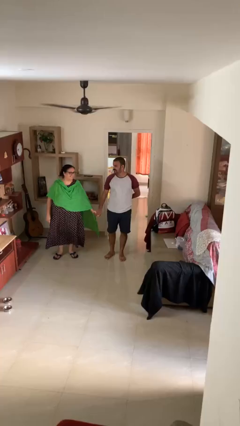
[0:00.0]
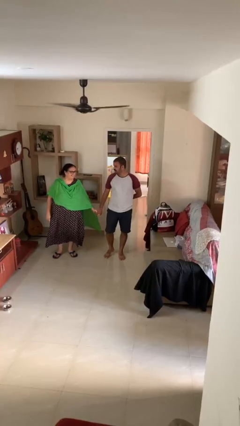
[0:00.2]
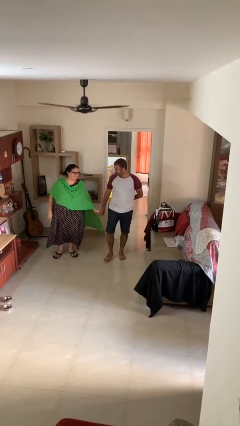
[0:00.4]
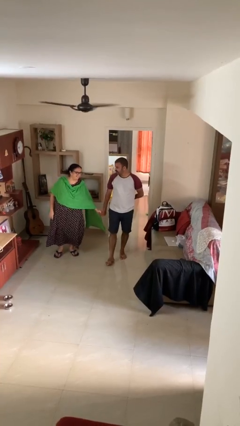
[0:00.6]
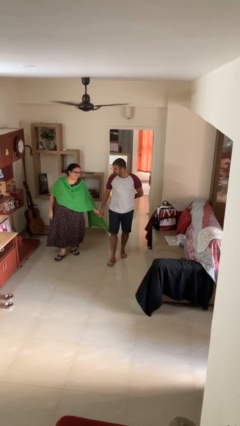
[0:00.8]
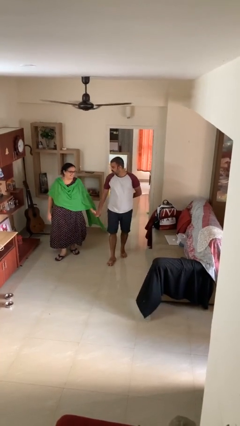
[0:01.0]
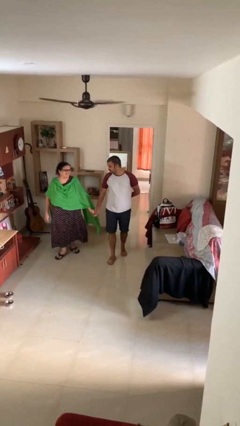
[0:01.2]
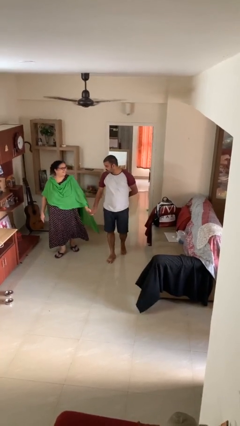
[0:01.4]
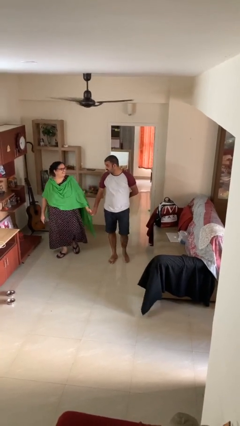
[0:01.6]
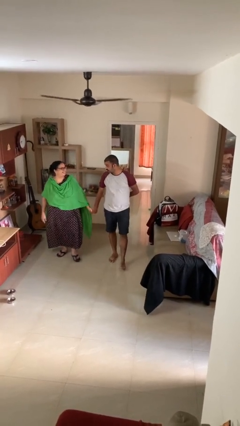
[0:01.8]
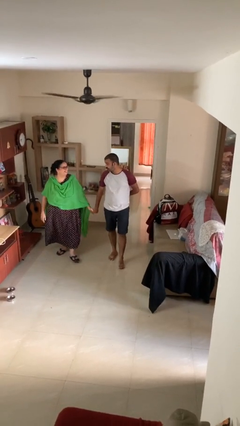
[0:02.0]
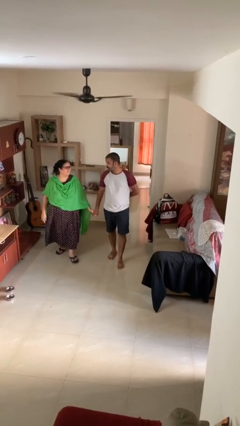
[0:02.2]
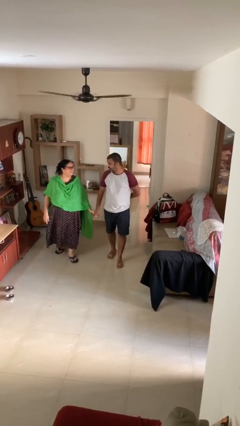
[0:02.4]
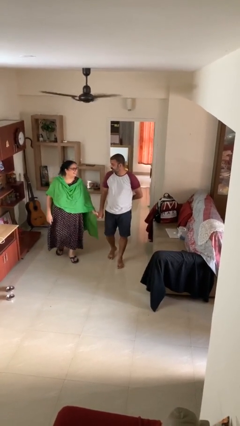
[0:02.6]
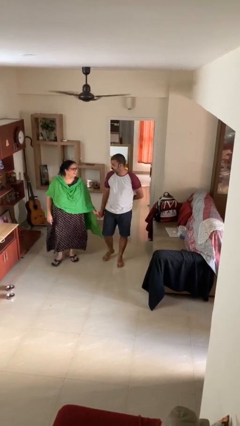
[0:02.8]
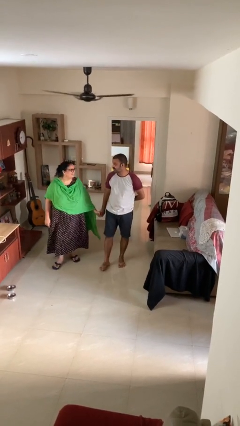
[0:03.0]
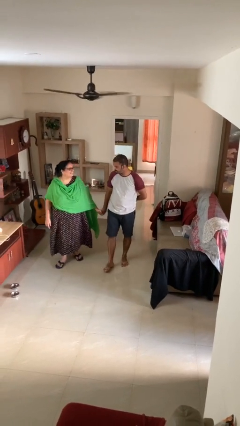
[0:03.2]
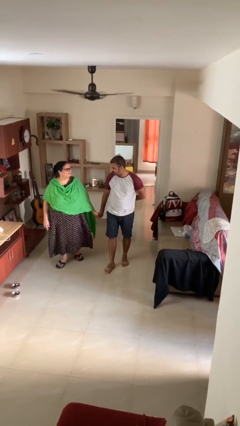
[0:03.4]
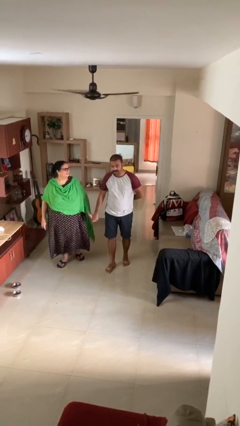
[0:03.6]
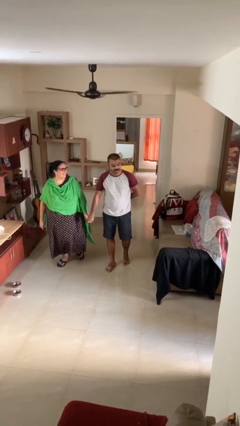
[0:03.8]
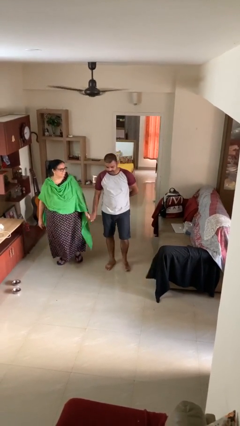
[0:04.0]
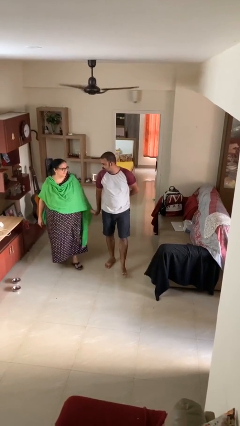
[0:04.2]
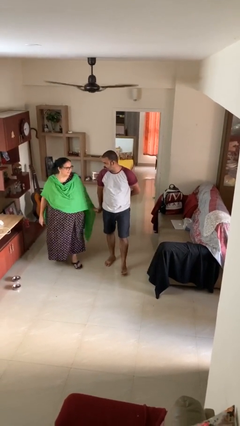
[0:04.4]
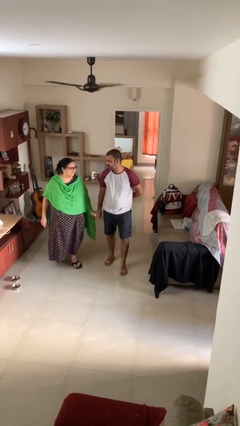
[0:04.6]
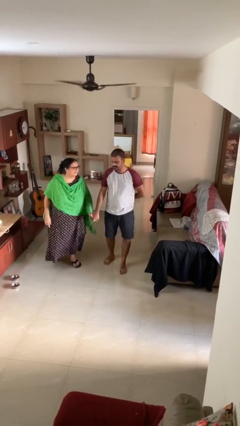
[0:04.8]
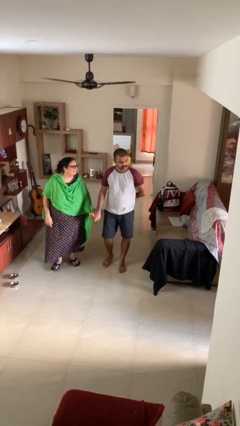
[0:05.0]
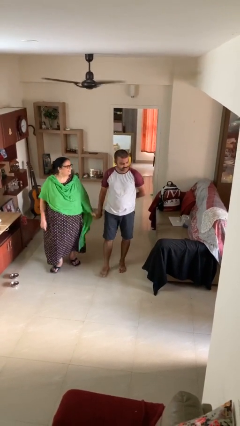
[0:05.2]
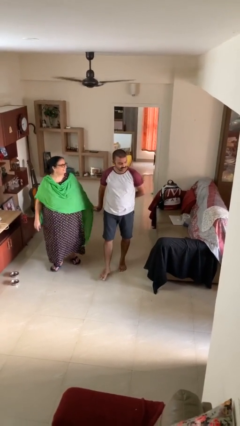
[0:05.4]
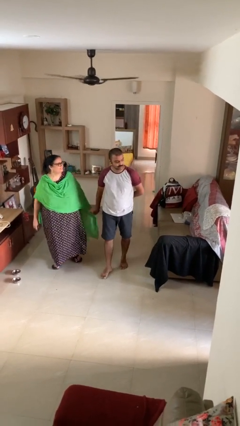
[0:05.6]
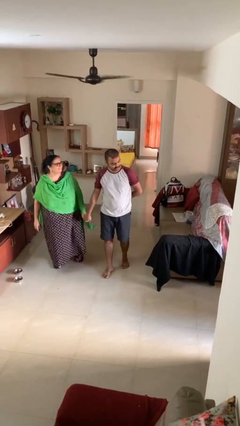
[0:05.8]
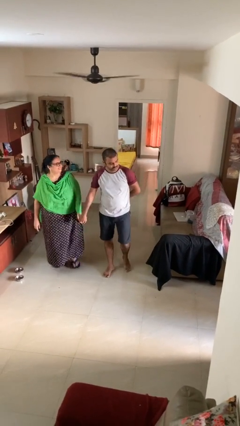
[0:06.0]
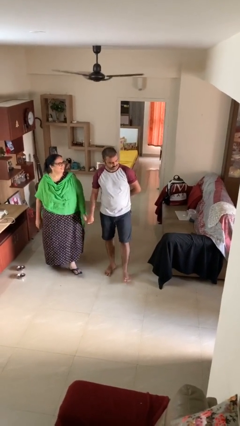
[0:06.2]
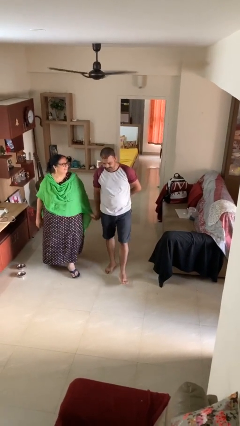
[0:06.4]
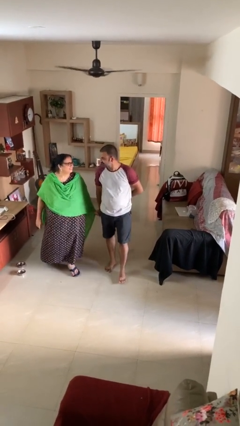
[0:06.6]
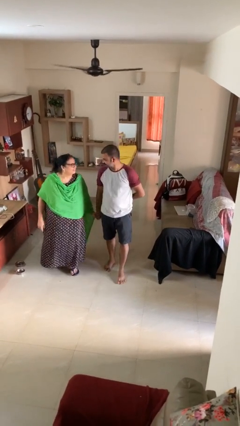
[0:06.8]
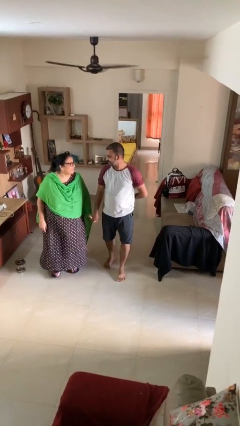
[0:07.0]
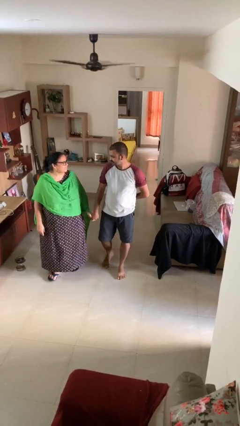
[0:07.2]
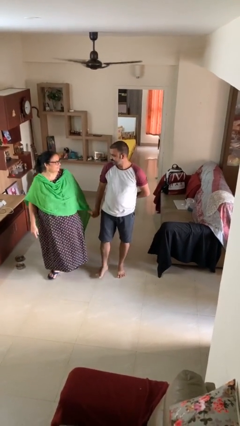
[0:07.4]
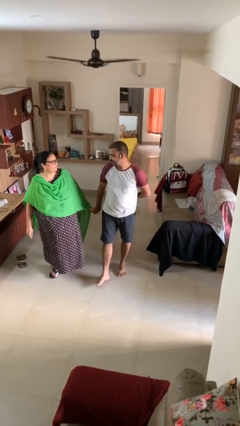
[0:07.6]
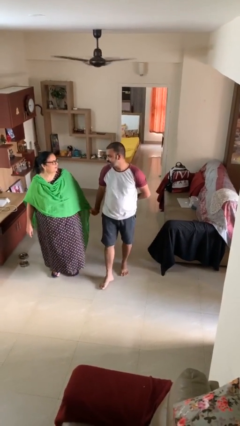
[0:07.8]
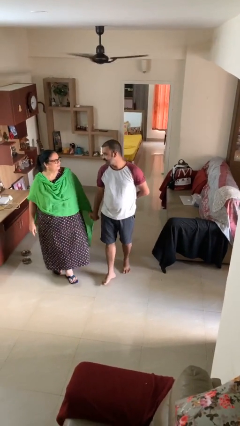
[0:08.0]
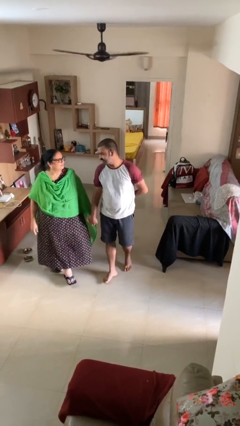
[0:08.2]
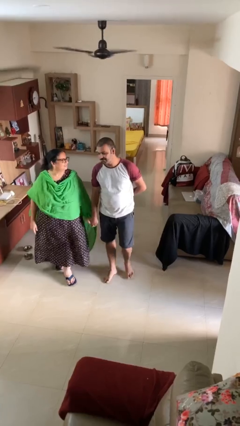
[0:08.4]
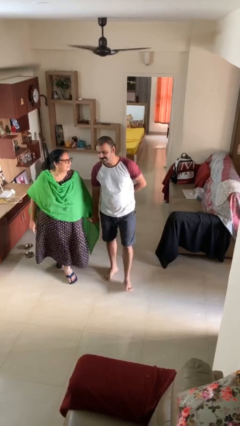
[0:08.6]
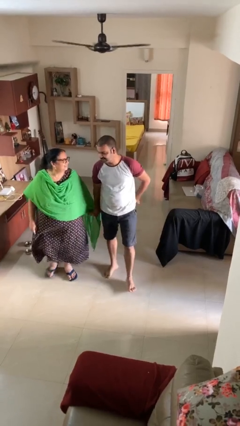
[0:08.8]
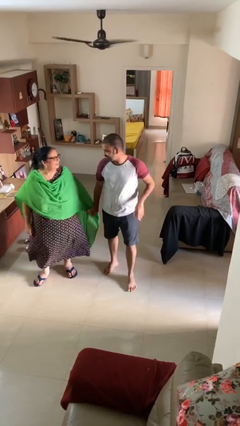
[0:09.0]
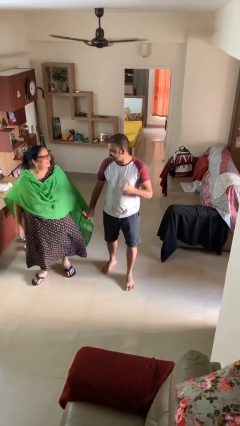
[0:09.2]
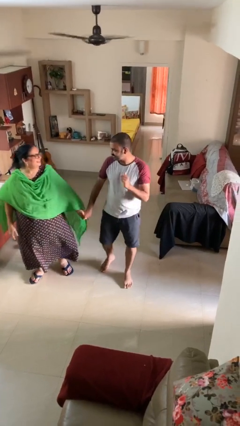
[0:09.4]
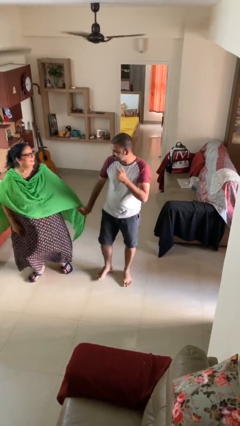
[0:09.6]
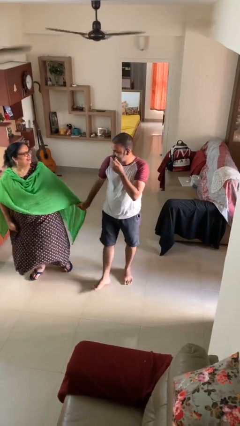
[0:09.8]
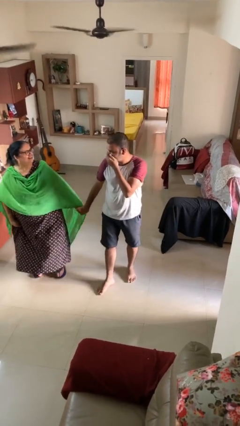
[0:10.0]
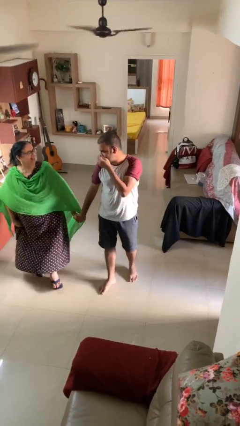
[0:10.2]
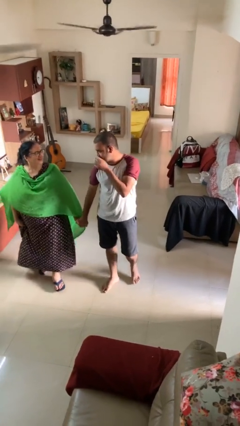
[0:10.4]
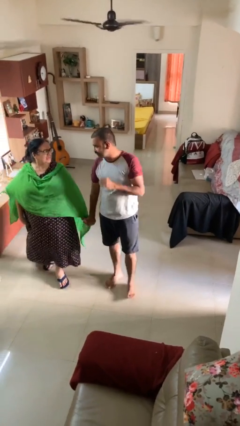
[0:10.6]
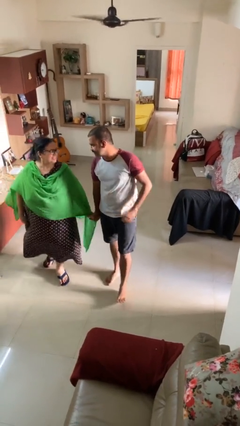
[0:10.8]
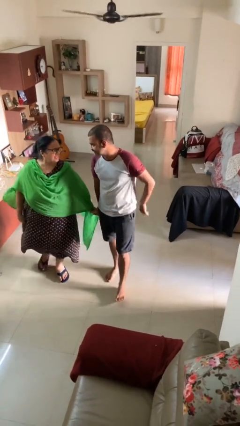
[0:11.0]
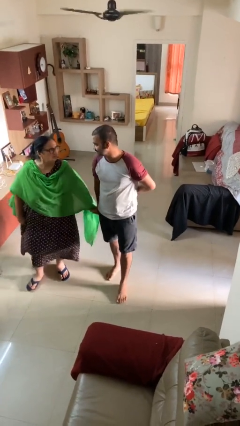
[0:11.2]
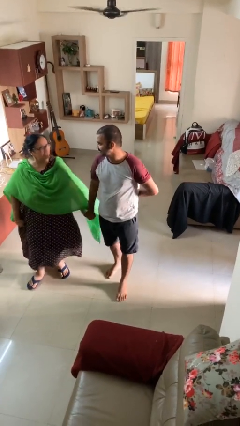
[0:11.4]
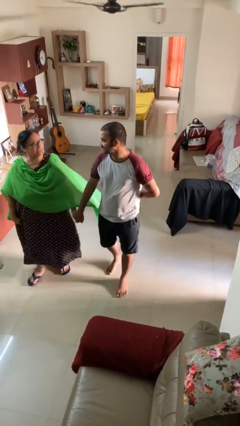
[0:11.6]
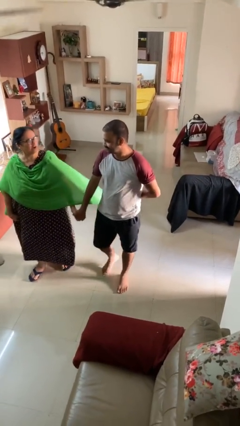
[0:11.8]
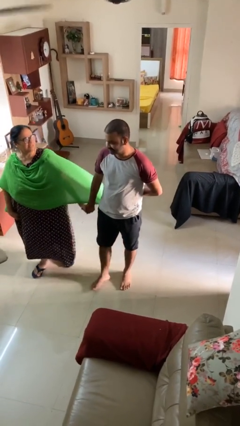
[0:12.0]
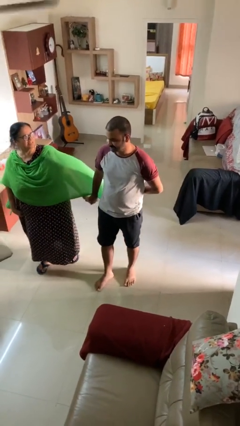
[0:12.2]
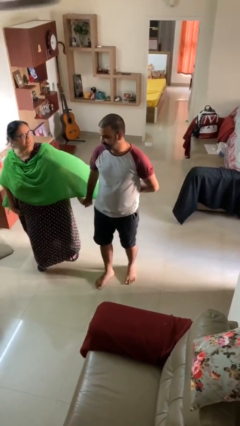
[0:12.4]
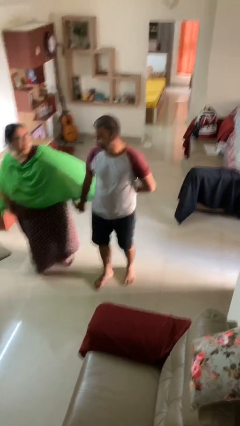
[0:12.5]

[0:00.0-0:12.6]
person holds hand

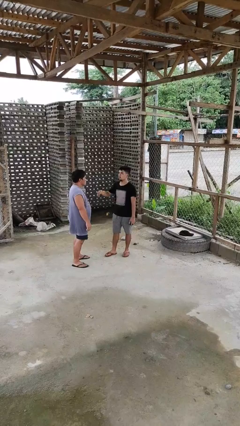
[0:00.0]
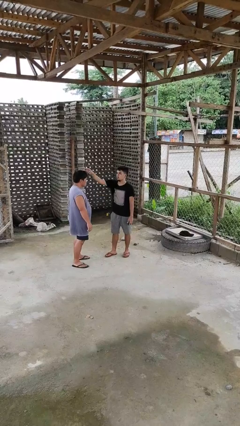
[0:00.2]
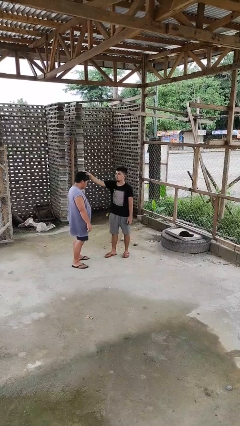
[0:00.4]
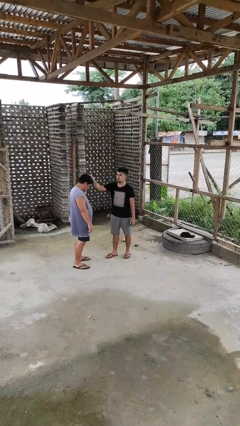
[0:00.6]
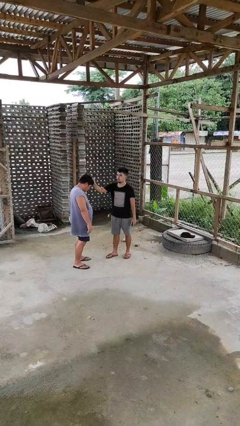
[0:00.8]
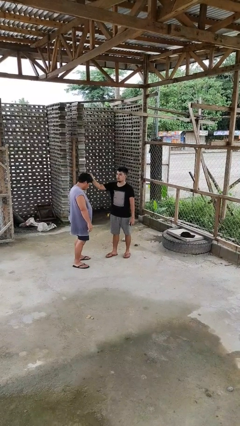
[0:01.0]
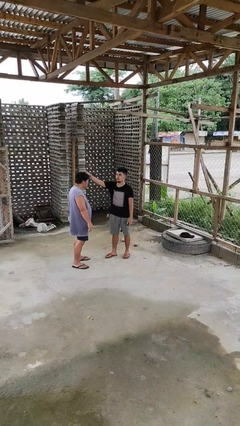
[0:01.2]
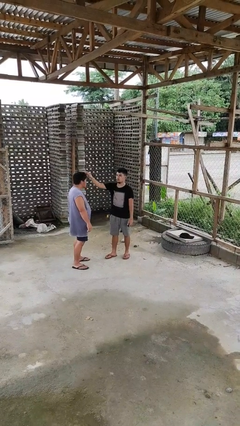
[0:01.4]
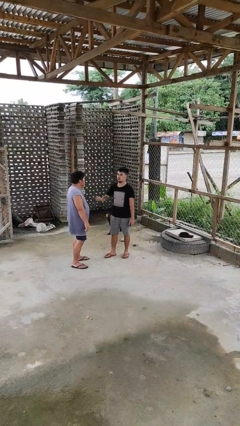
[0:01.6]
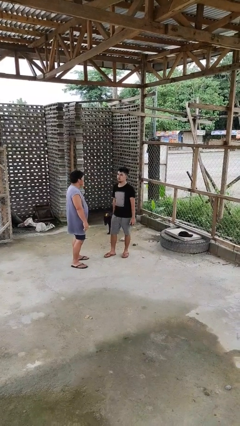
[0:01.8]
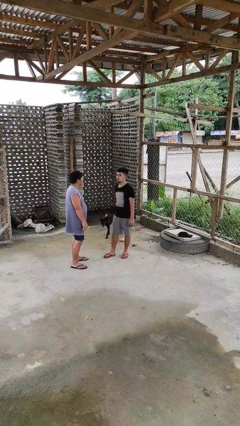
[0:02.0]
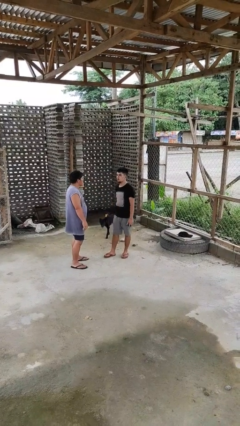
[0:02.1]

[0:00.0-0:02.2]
person grabs person by hair

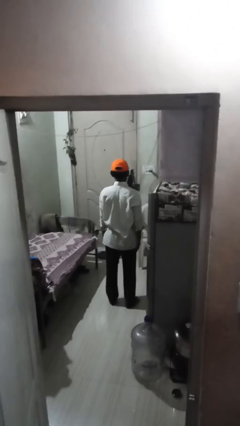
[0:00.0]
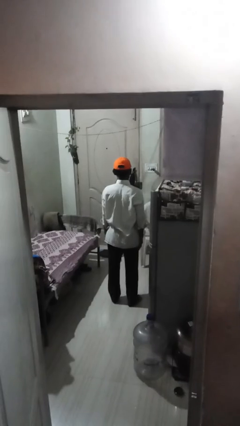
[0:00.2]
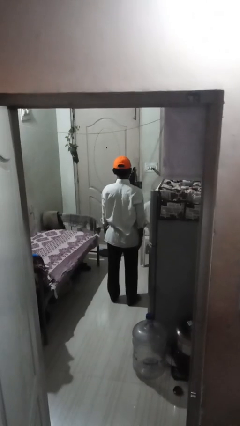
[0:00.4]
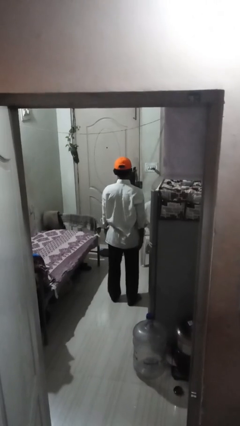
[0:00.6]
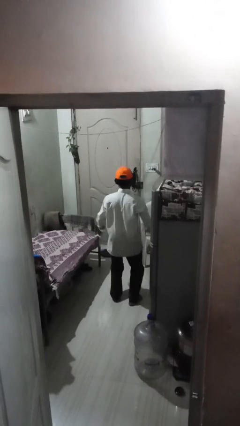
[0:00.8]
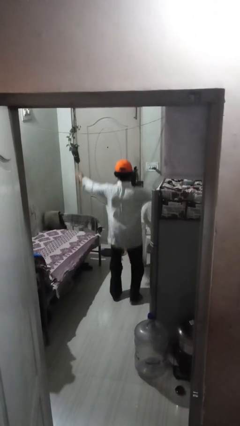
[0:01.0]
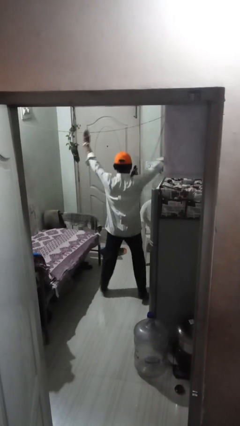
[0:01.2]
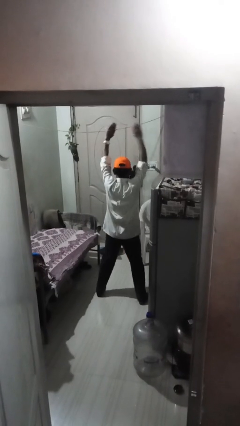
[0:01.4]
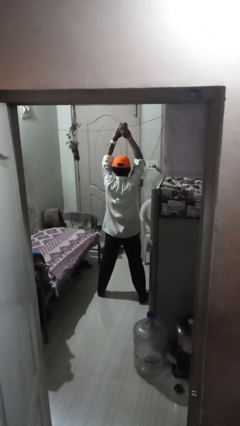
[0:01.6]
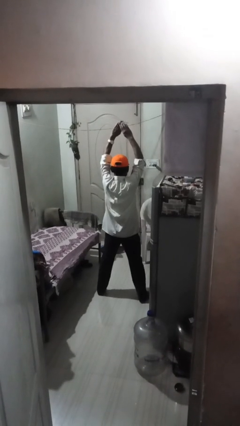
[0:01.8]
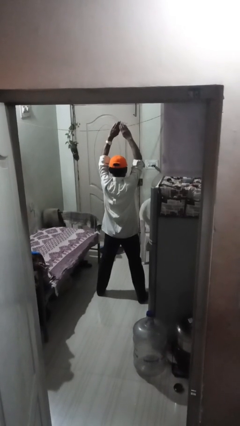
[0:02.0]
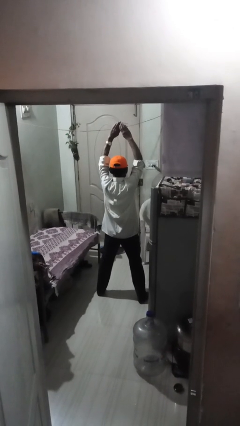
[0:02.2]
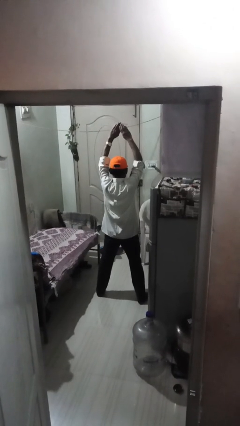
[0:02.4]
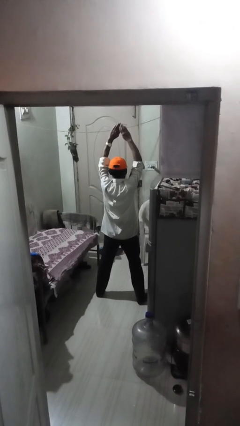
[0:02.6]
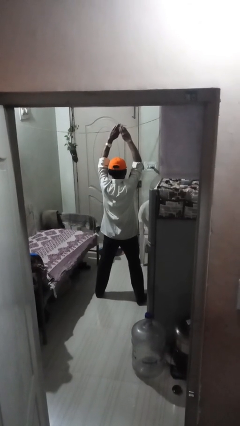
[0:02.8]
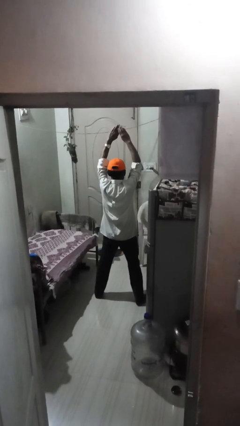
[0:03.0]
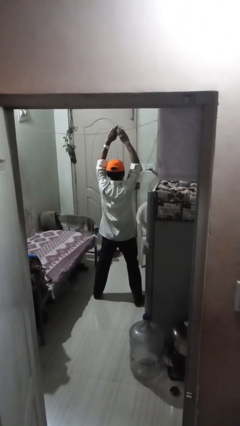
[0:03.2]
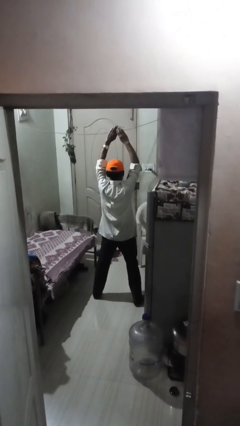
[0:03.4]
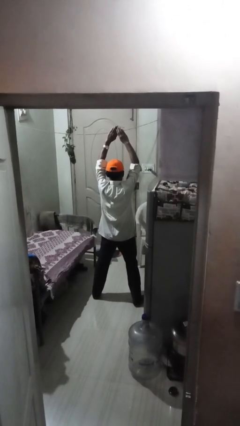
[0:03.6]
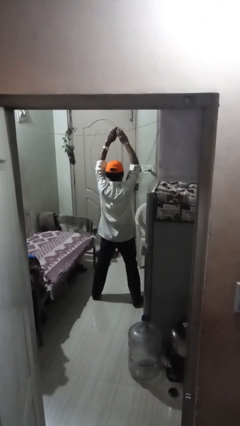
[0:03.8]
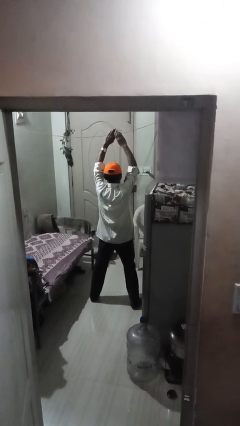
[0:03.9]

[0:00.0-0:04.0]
person exercises with jumping jacks
